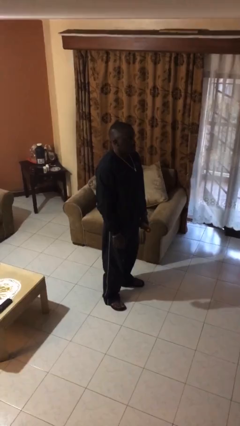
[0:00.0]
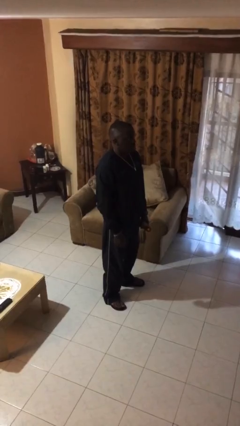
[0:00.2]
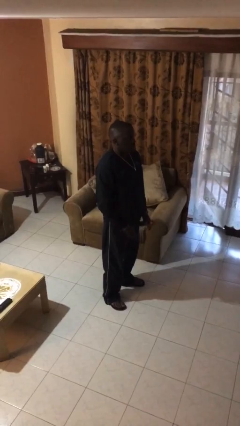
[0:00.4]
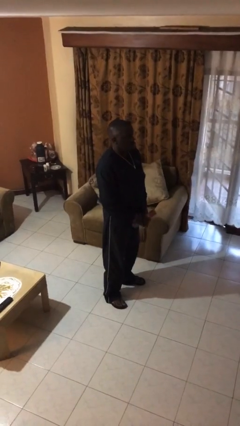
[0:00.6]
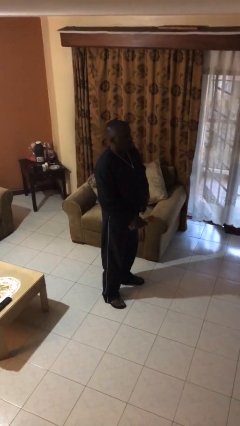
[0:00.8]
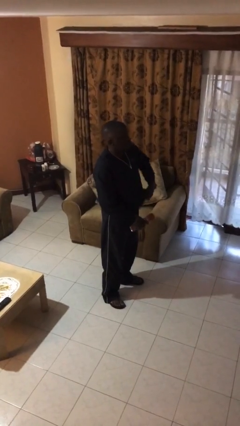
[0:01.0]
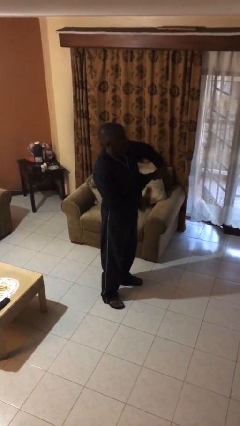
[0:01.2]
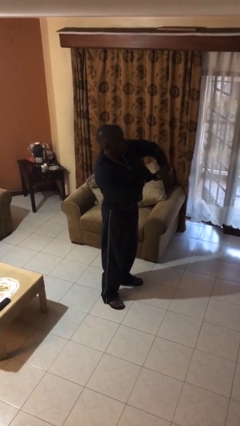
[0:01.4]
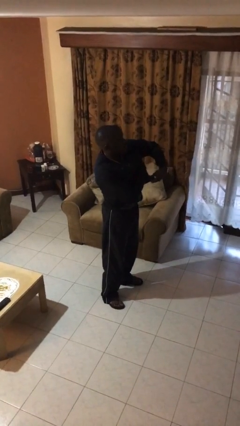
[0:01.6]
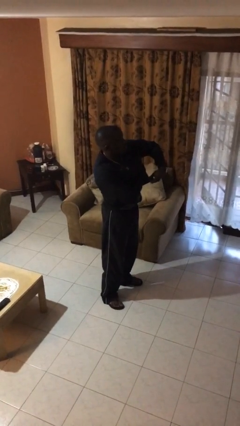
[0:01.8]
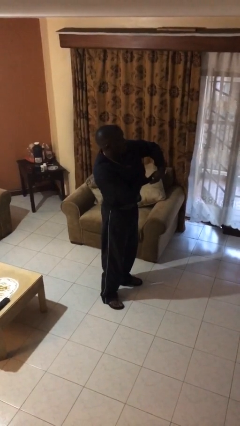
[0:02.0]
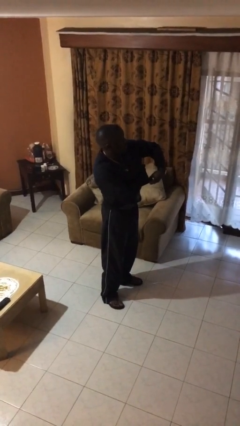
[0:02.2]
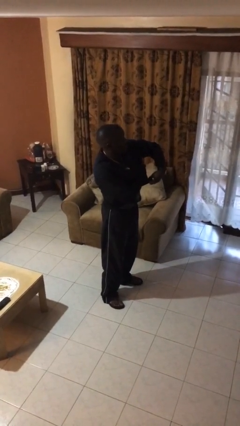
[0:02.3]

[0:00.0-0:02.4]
person applies deodorant

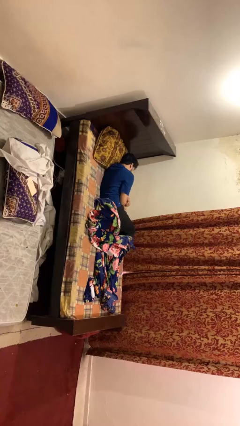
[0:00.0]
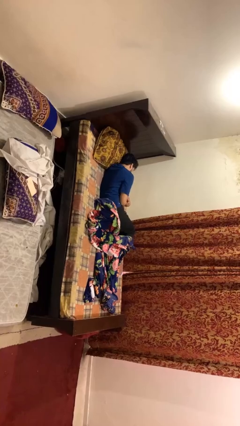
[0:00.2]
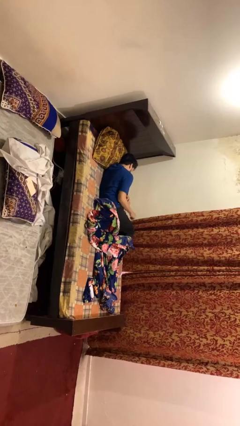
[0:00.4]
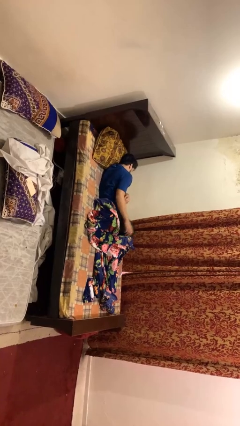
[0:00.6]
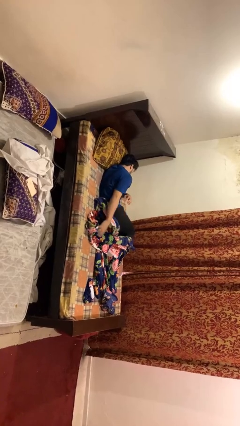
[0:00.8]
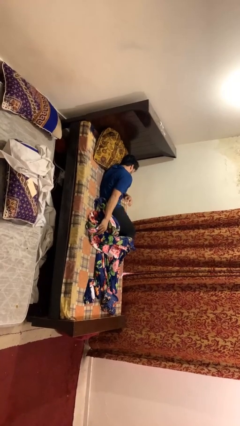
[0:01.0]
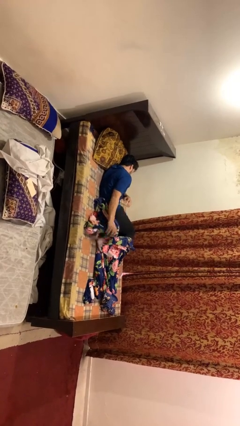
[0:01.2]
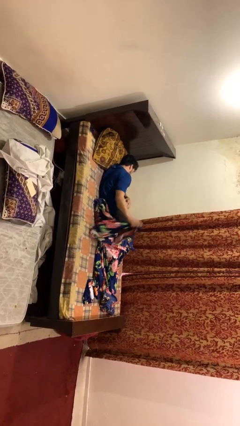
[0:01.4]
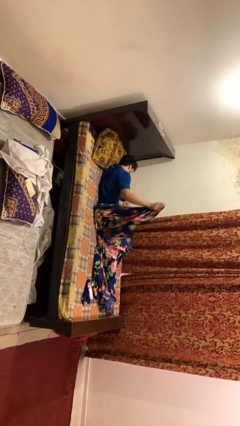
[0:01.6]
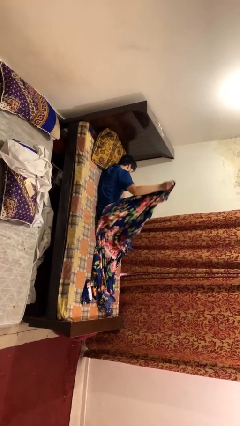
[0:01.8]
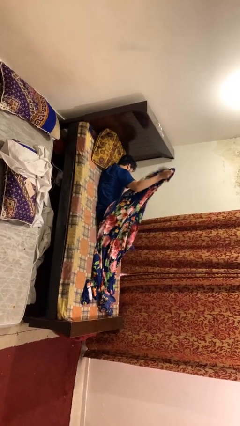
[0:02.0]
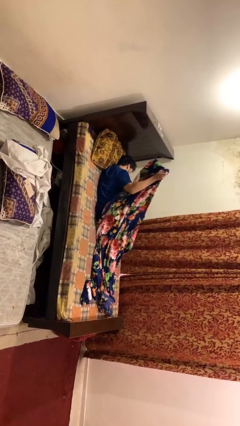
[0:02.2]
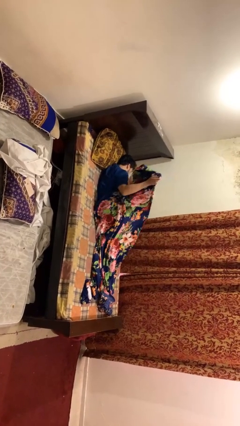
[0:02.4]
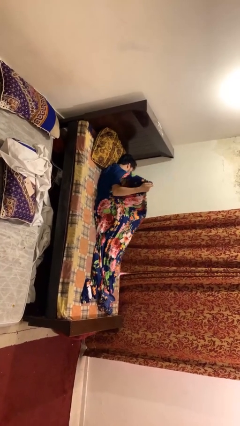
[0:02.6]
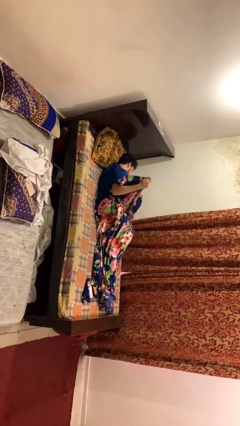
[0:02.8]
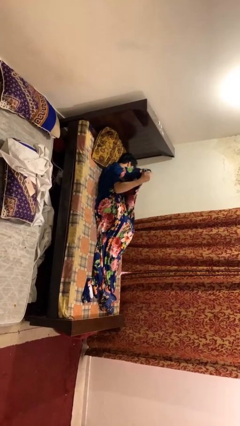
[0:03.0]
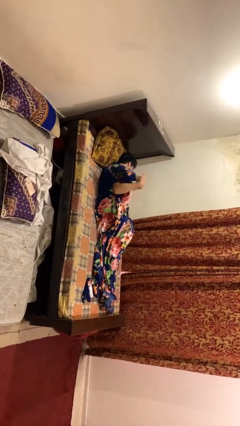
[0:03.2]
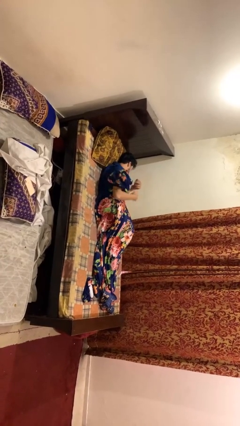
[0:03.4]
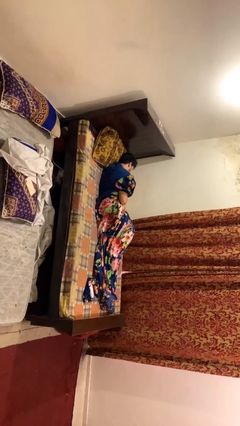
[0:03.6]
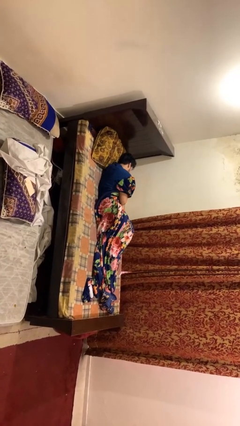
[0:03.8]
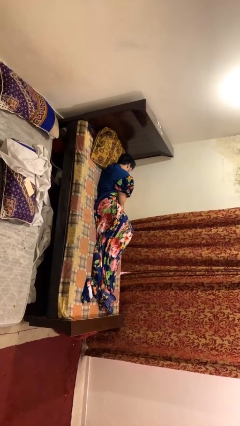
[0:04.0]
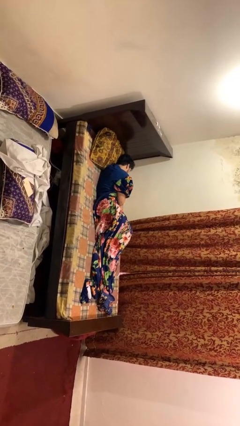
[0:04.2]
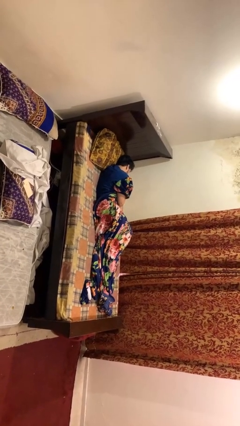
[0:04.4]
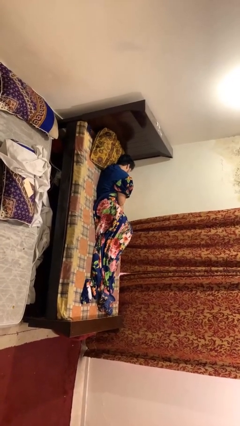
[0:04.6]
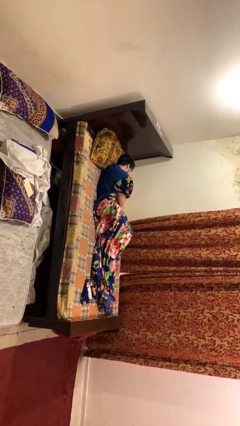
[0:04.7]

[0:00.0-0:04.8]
person covers with blanket

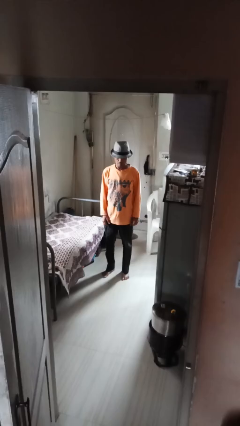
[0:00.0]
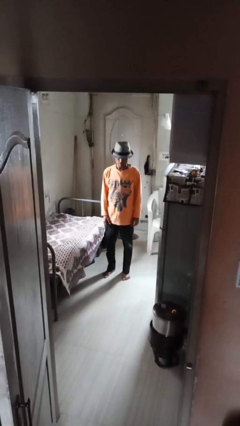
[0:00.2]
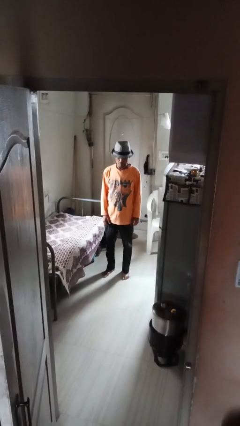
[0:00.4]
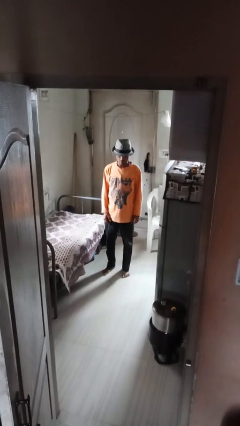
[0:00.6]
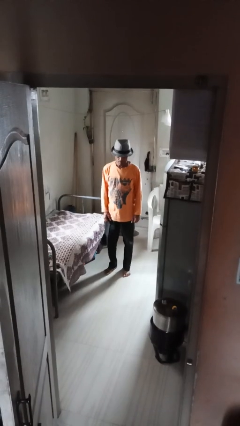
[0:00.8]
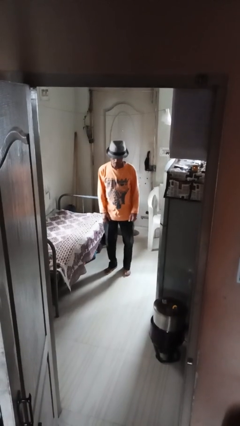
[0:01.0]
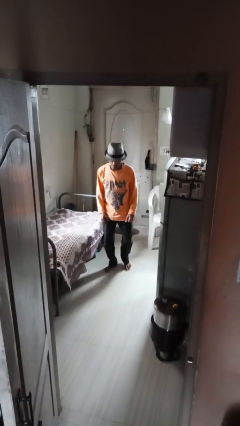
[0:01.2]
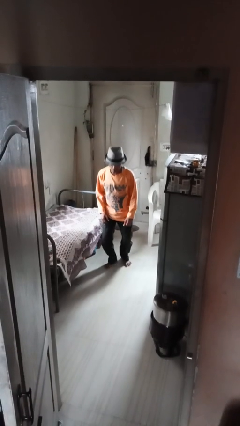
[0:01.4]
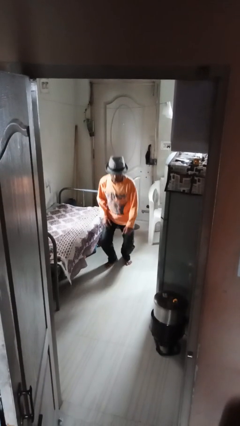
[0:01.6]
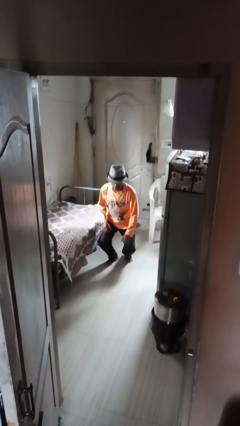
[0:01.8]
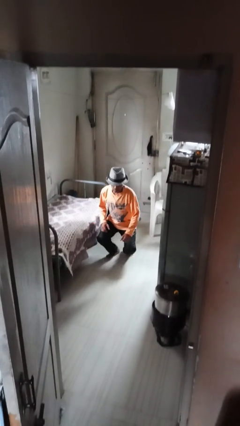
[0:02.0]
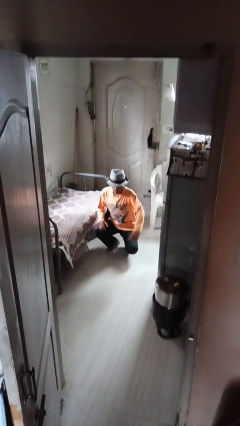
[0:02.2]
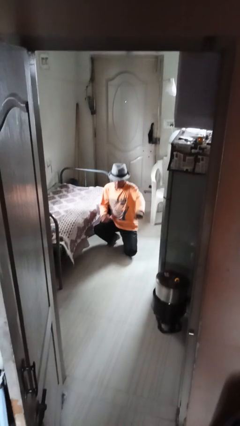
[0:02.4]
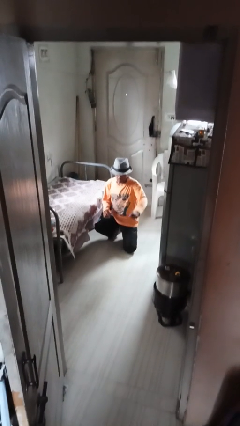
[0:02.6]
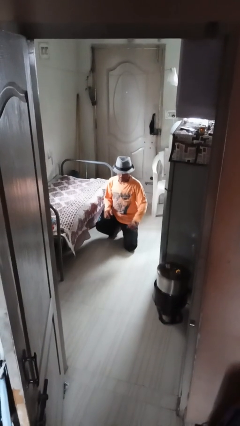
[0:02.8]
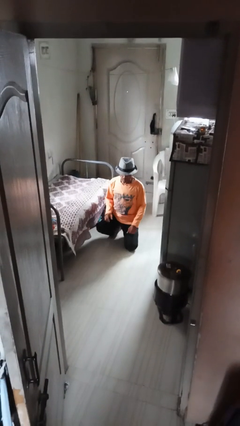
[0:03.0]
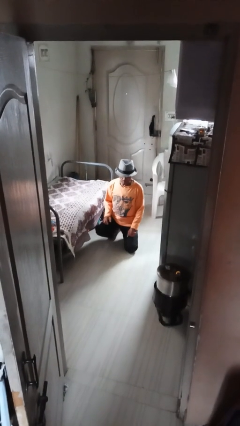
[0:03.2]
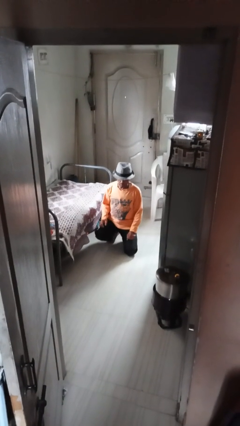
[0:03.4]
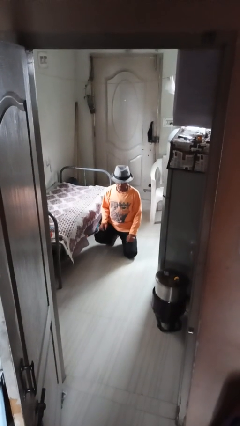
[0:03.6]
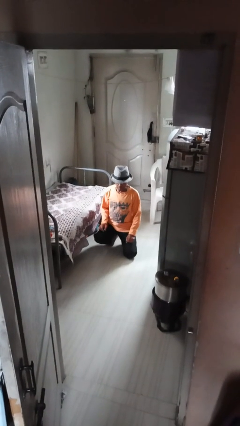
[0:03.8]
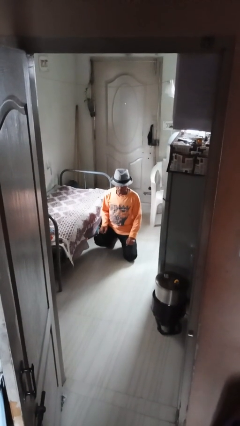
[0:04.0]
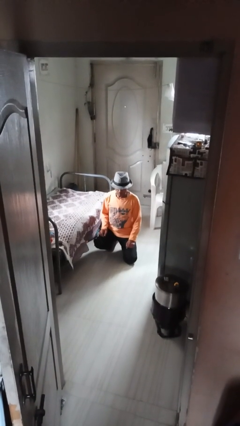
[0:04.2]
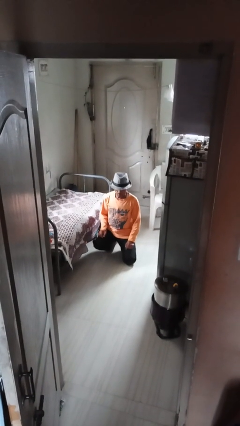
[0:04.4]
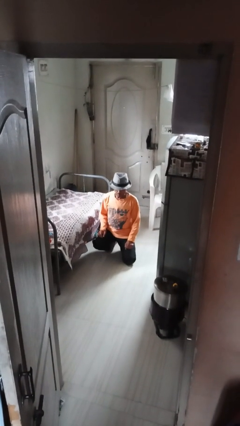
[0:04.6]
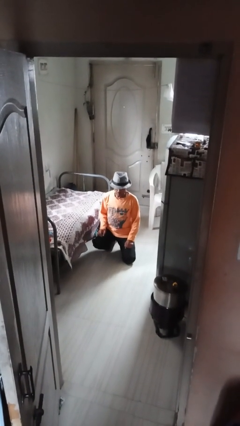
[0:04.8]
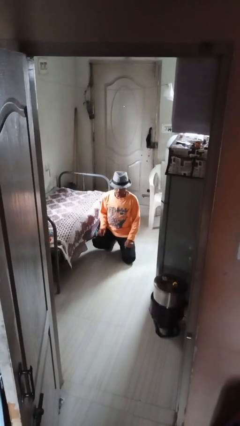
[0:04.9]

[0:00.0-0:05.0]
person kneels

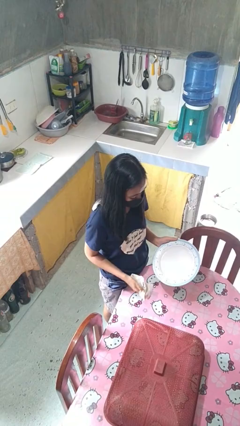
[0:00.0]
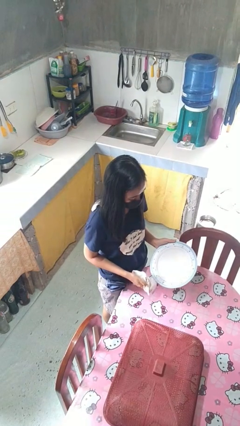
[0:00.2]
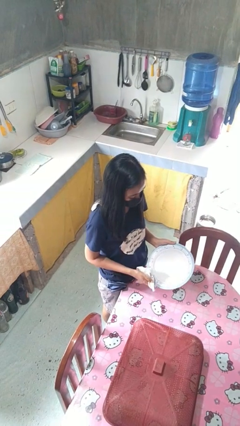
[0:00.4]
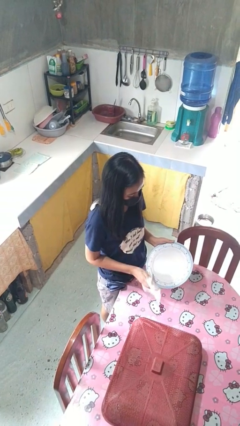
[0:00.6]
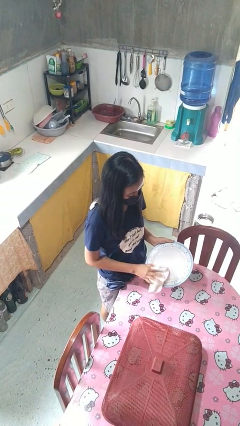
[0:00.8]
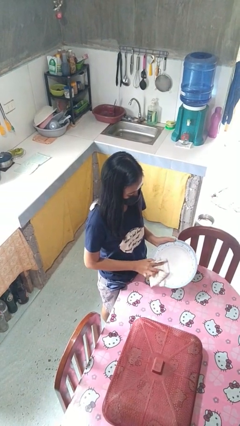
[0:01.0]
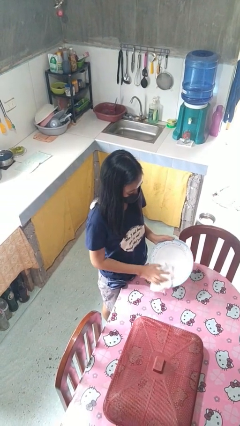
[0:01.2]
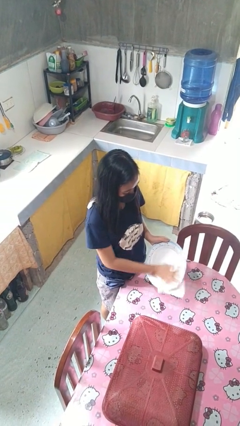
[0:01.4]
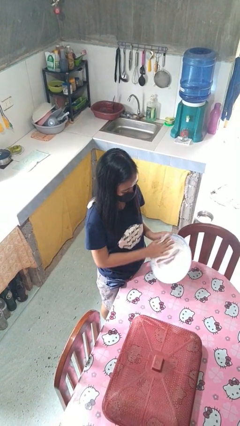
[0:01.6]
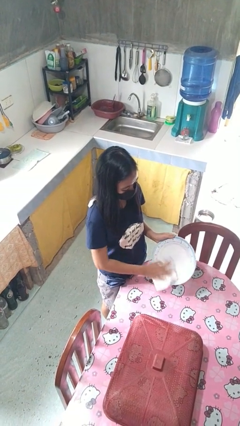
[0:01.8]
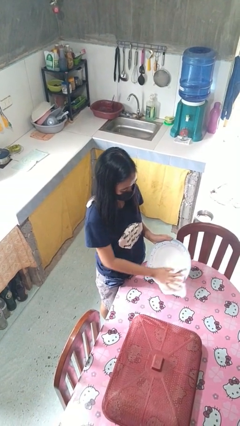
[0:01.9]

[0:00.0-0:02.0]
person dries dish

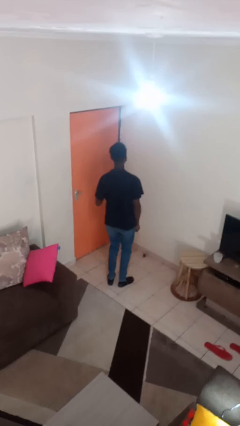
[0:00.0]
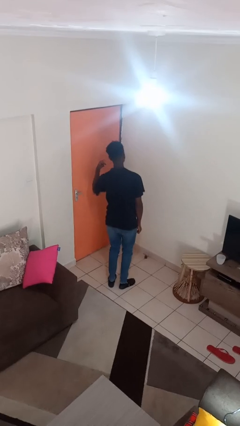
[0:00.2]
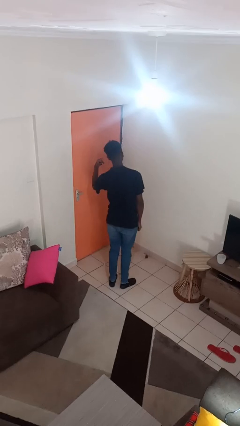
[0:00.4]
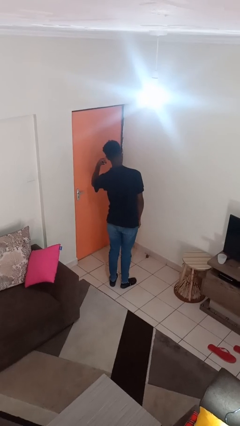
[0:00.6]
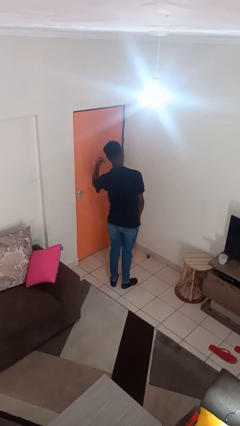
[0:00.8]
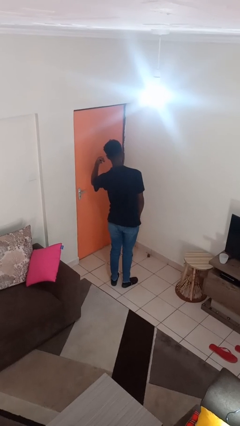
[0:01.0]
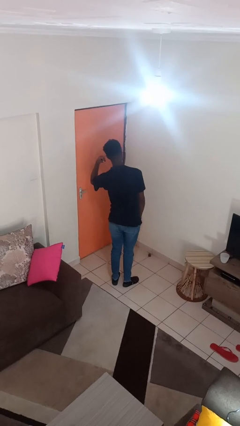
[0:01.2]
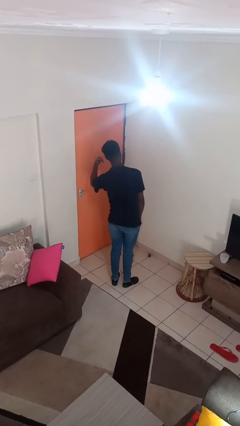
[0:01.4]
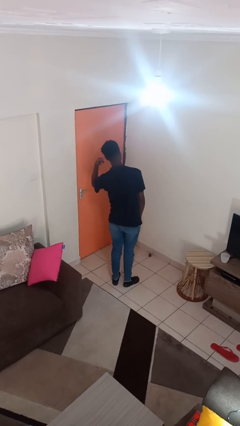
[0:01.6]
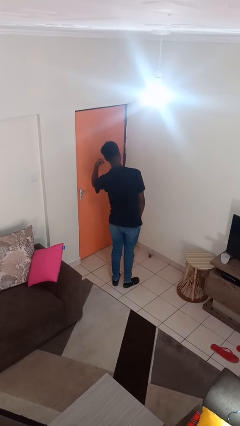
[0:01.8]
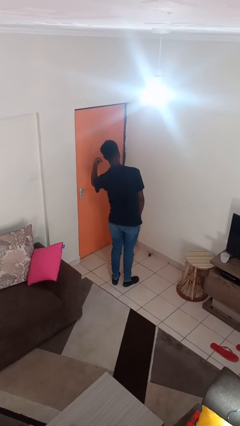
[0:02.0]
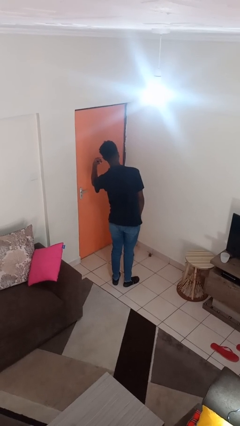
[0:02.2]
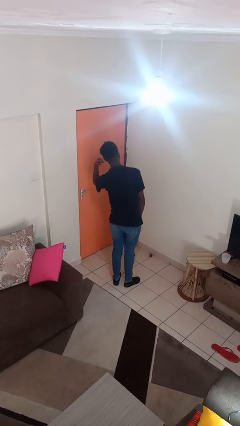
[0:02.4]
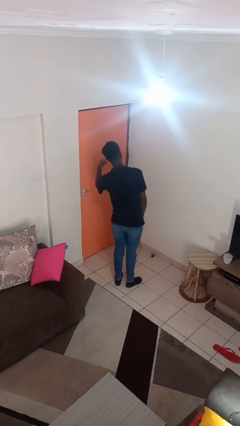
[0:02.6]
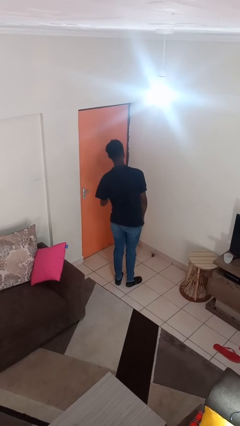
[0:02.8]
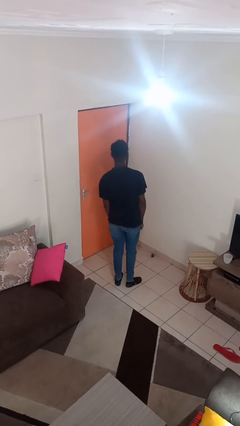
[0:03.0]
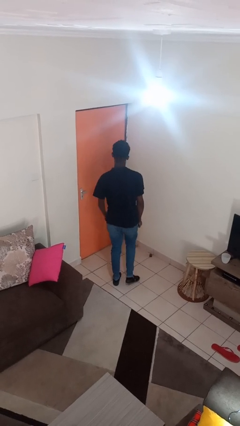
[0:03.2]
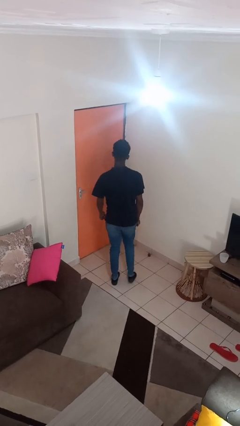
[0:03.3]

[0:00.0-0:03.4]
person gestures listen closely
